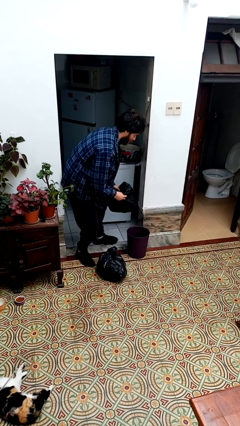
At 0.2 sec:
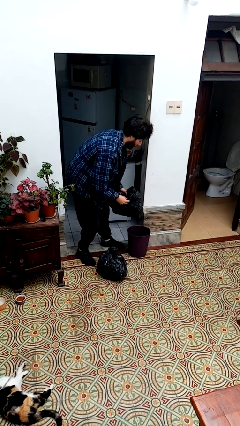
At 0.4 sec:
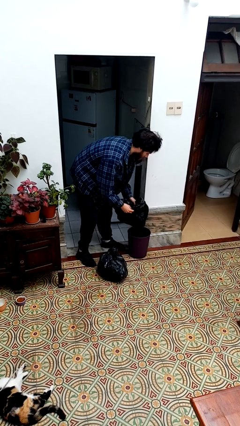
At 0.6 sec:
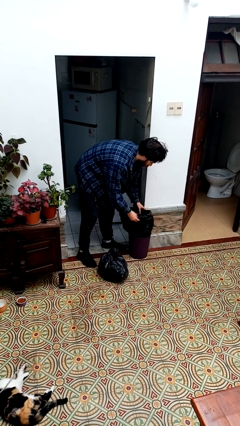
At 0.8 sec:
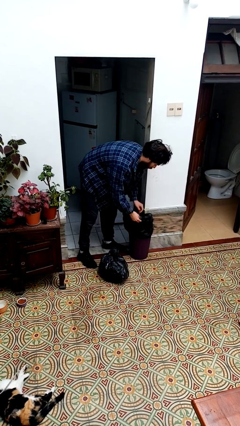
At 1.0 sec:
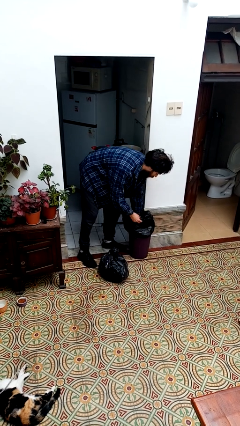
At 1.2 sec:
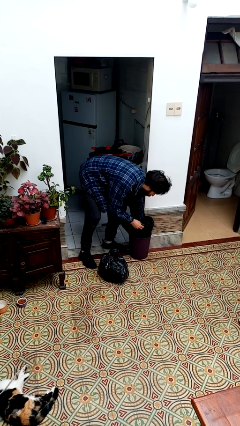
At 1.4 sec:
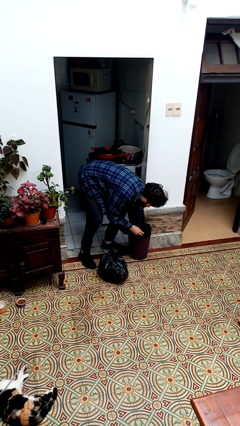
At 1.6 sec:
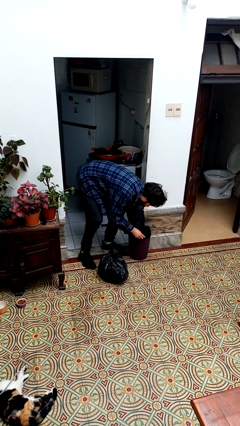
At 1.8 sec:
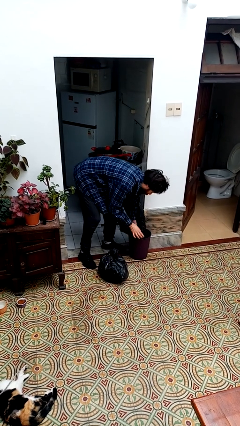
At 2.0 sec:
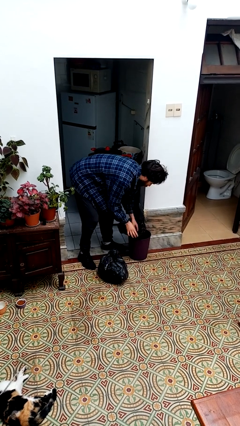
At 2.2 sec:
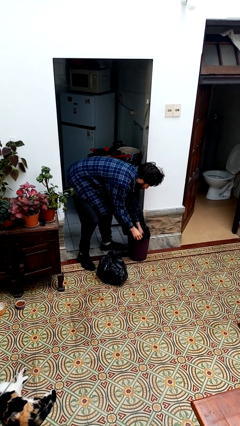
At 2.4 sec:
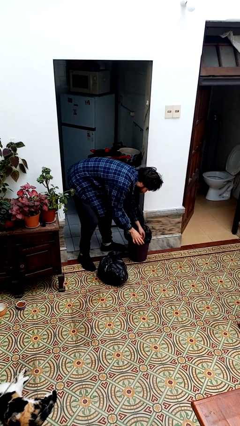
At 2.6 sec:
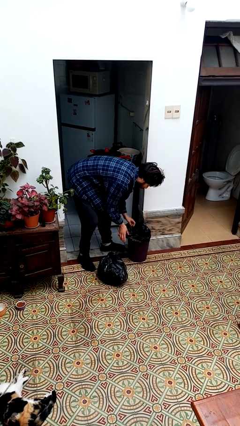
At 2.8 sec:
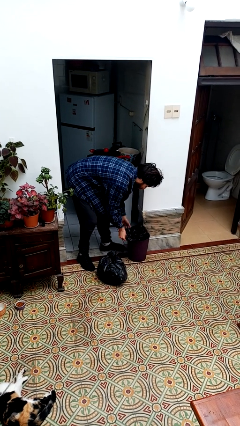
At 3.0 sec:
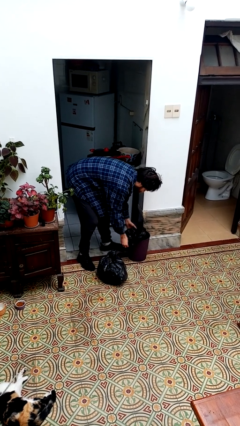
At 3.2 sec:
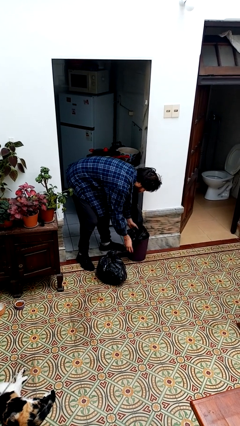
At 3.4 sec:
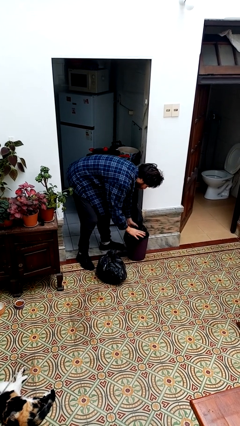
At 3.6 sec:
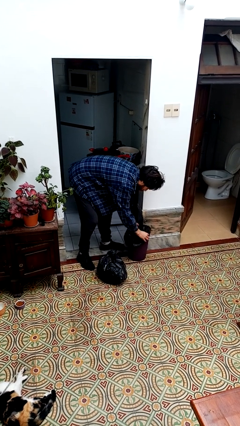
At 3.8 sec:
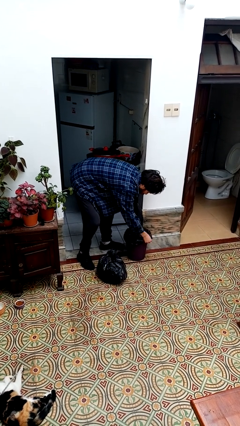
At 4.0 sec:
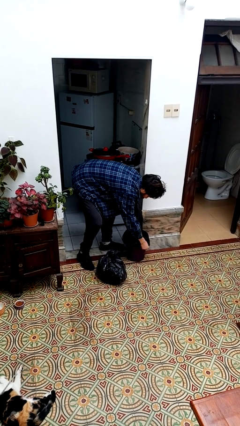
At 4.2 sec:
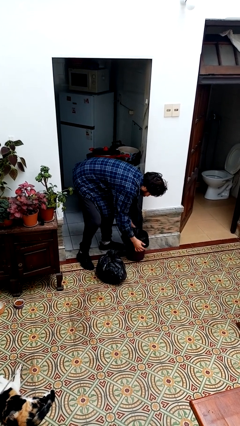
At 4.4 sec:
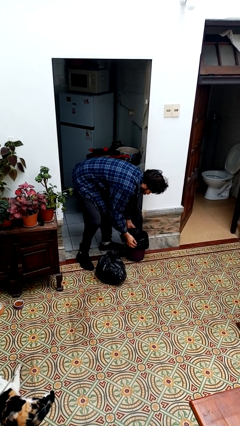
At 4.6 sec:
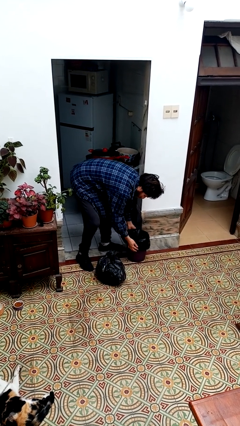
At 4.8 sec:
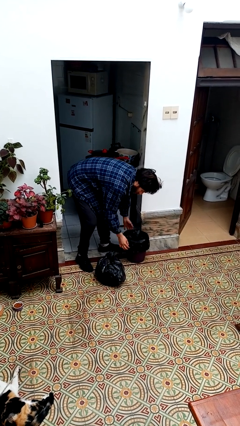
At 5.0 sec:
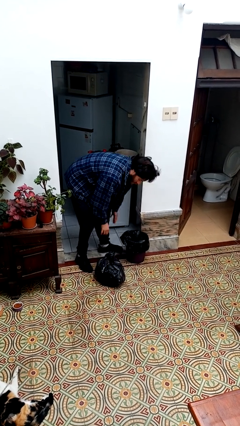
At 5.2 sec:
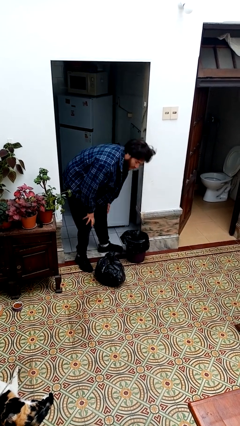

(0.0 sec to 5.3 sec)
person inserts trashbag into trashcan

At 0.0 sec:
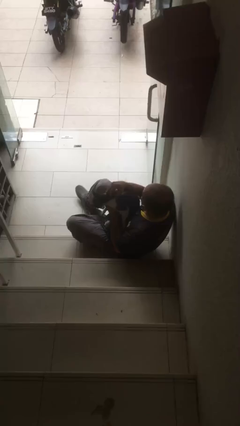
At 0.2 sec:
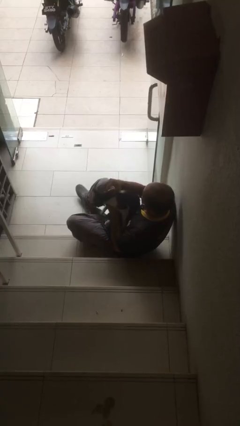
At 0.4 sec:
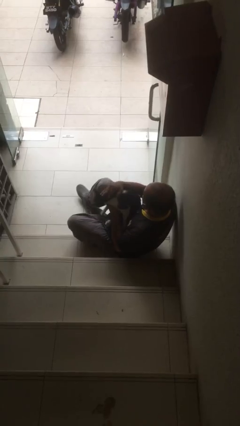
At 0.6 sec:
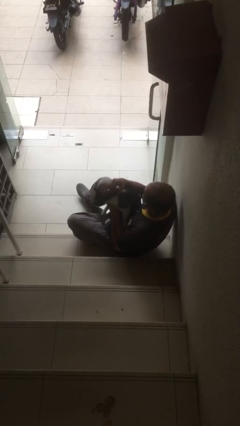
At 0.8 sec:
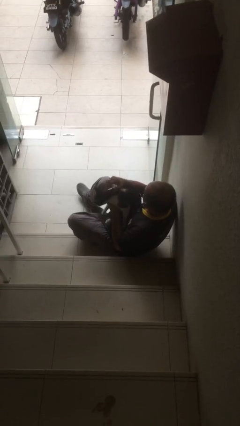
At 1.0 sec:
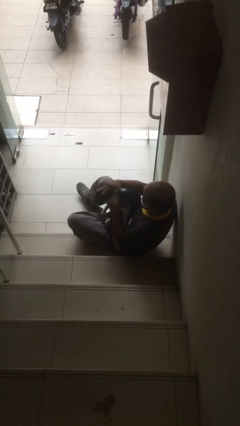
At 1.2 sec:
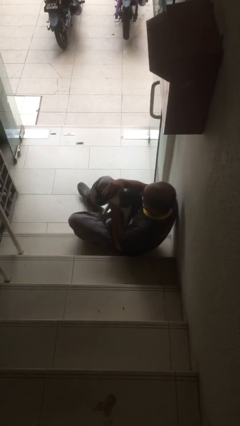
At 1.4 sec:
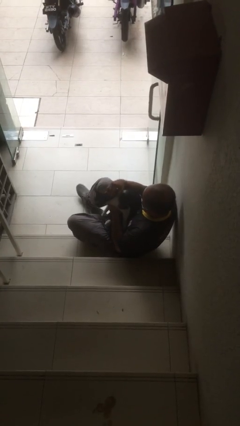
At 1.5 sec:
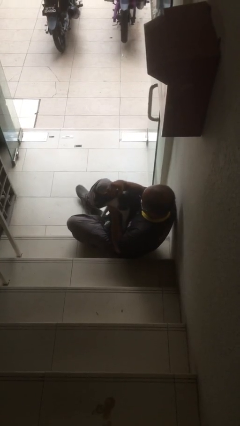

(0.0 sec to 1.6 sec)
person pets cat

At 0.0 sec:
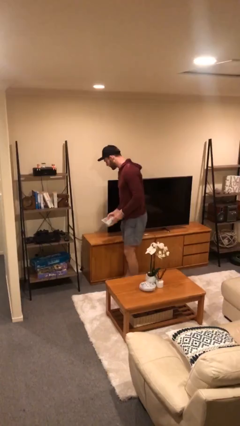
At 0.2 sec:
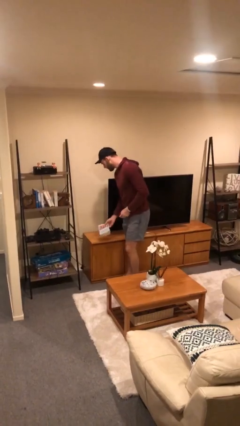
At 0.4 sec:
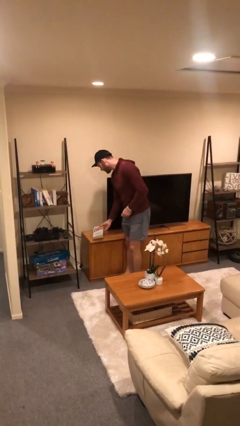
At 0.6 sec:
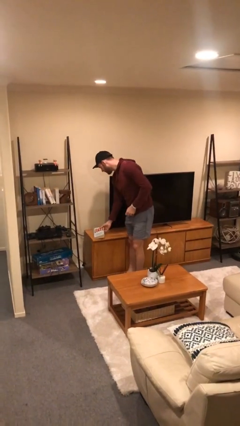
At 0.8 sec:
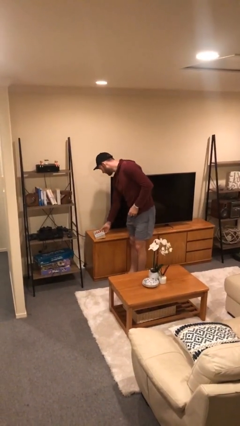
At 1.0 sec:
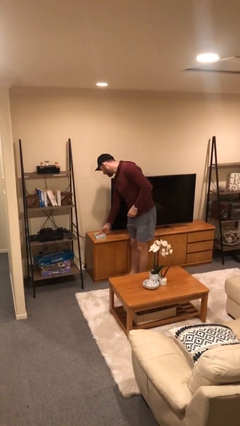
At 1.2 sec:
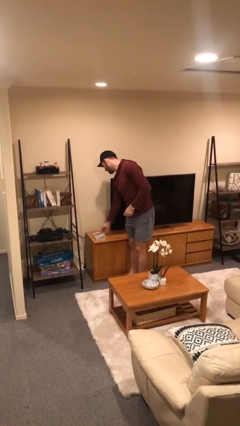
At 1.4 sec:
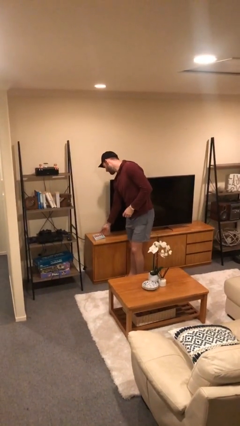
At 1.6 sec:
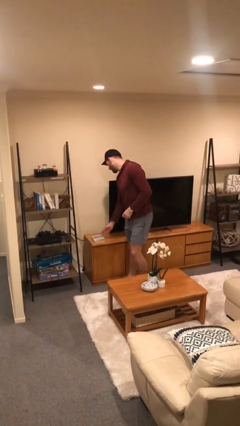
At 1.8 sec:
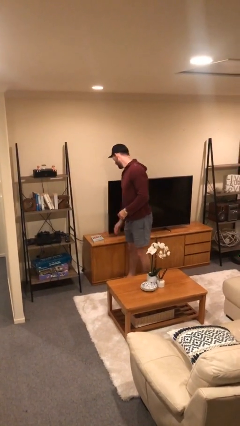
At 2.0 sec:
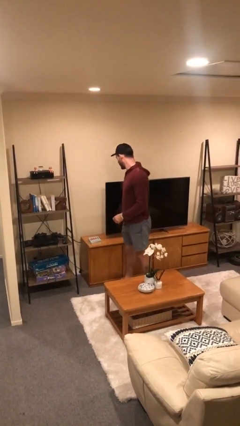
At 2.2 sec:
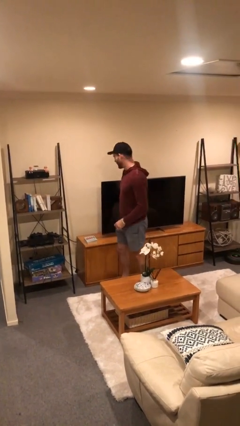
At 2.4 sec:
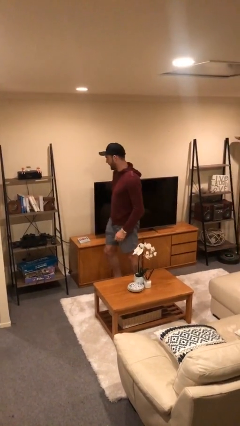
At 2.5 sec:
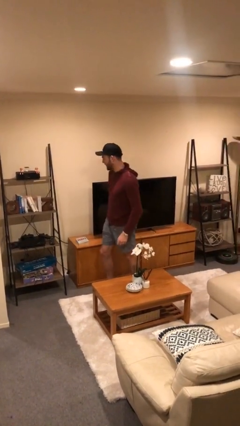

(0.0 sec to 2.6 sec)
person puts down object on table

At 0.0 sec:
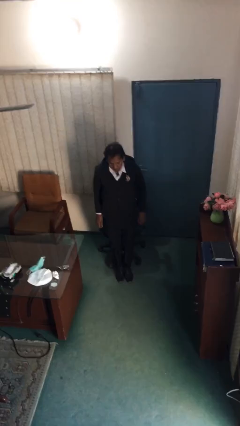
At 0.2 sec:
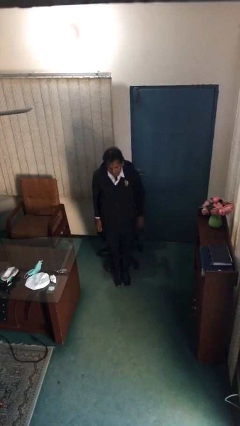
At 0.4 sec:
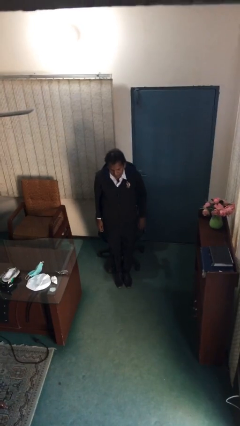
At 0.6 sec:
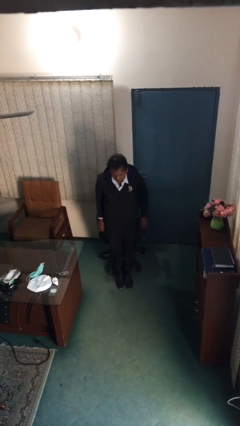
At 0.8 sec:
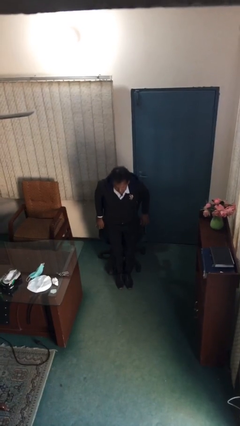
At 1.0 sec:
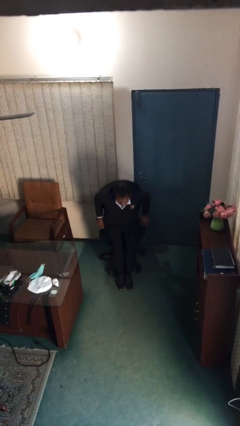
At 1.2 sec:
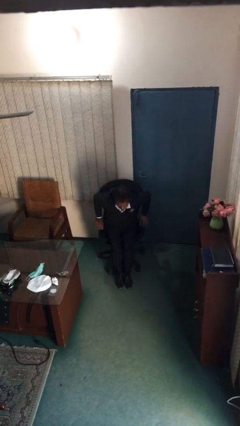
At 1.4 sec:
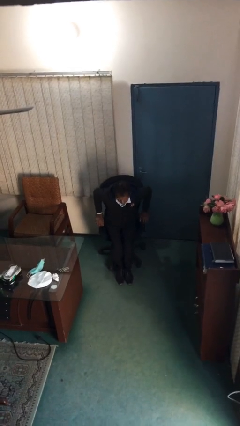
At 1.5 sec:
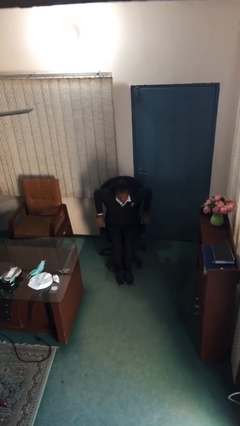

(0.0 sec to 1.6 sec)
person sits down

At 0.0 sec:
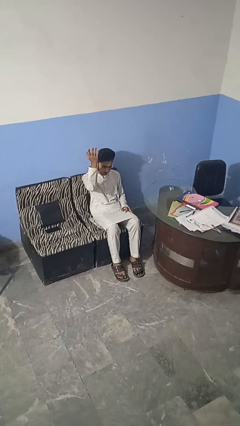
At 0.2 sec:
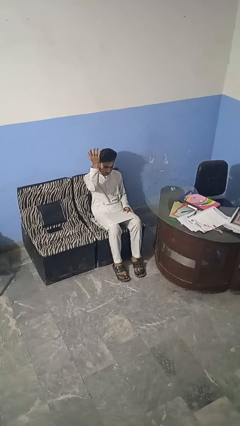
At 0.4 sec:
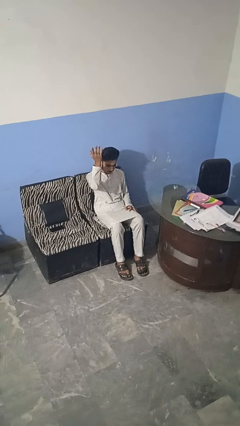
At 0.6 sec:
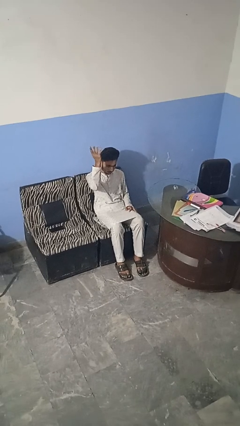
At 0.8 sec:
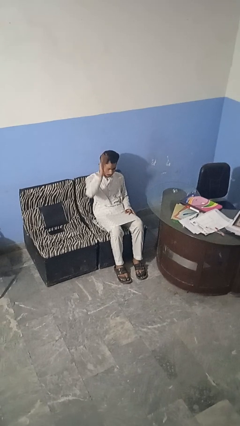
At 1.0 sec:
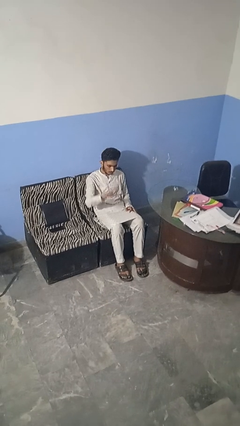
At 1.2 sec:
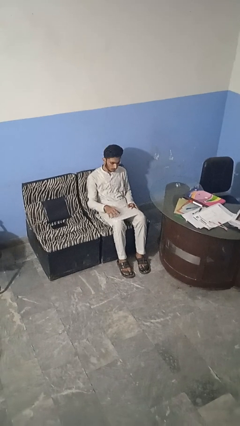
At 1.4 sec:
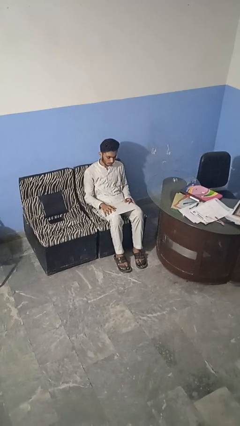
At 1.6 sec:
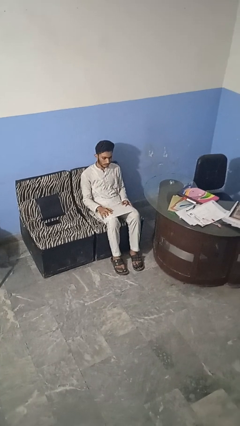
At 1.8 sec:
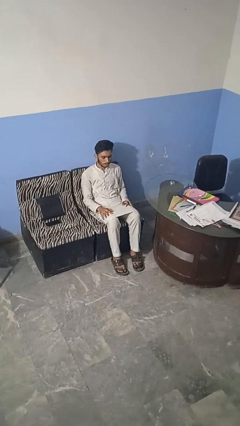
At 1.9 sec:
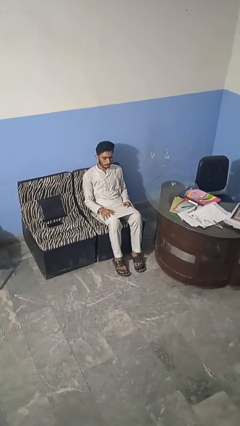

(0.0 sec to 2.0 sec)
person gestures swipe down

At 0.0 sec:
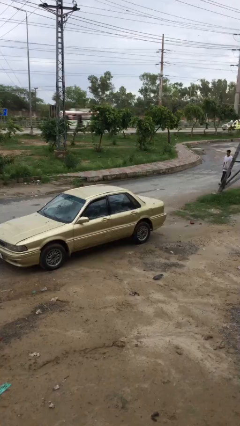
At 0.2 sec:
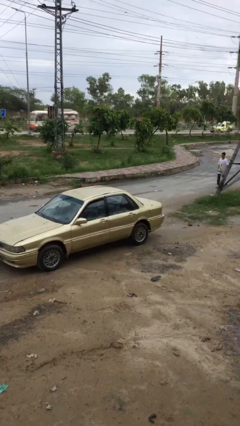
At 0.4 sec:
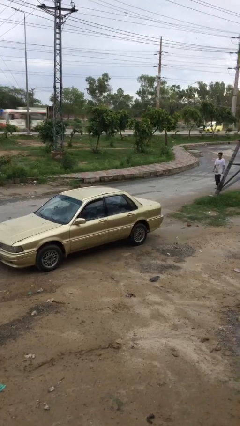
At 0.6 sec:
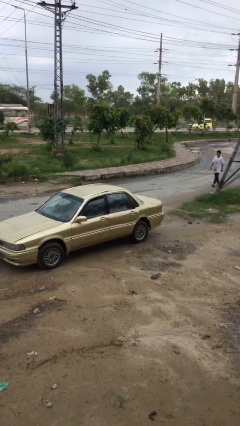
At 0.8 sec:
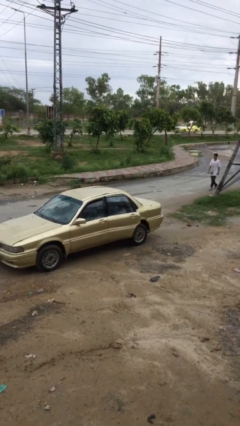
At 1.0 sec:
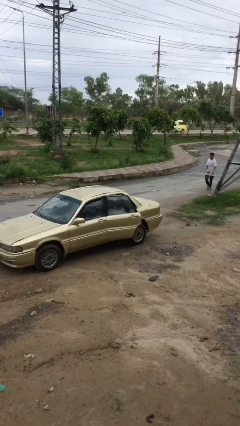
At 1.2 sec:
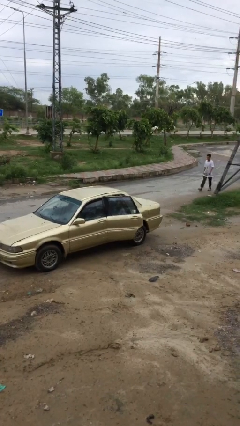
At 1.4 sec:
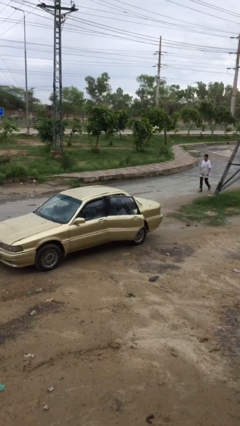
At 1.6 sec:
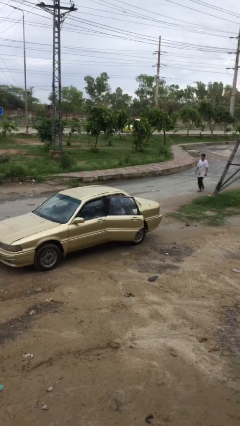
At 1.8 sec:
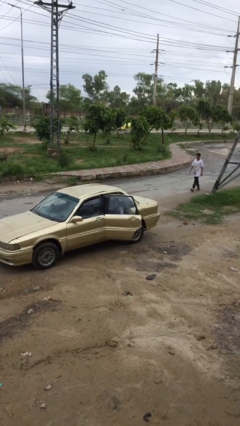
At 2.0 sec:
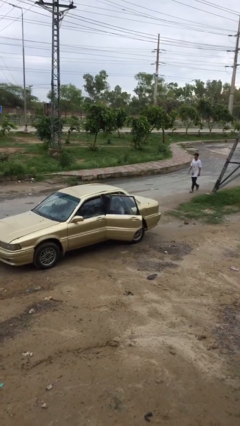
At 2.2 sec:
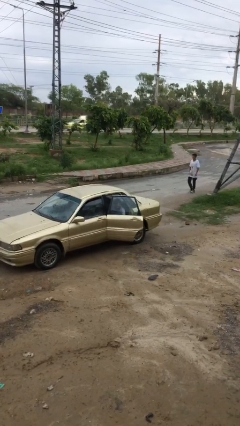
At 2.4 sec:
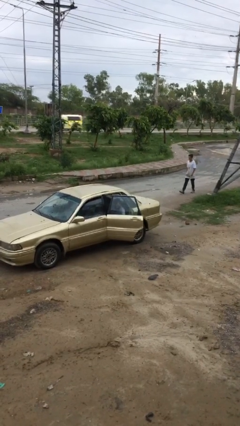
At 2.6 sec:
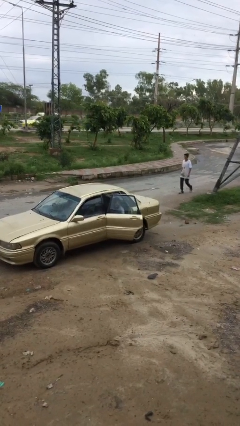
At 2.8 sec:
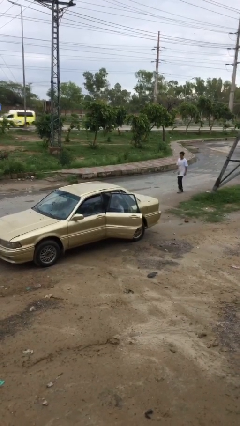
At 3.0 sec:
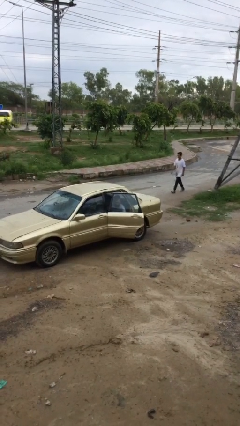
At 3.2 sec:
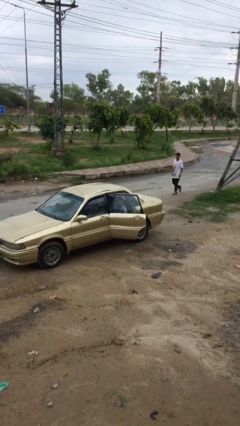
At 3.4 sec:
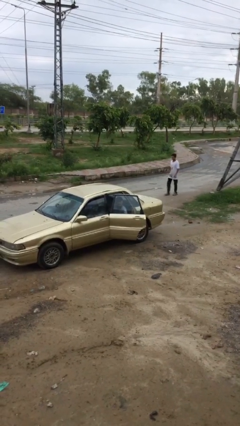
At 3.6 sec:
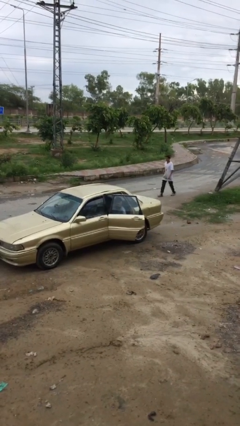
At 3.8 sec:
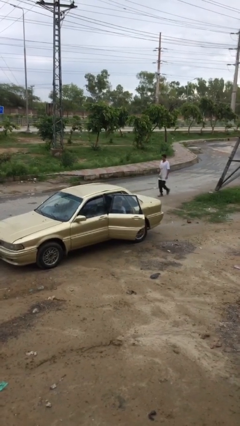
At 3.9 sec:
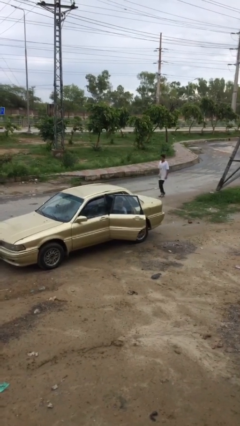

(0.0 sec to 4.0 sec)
person opens car door

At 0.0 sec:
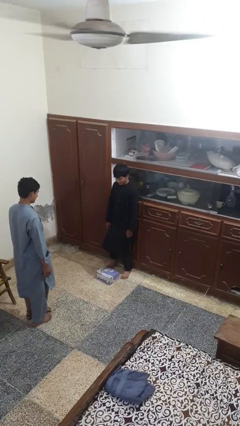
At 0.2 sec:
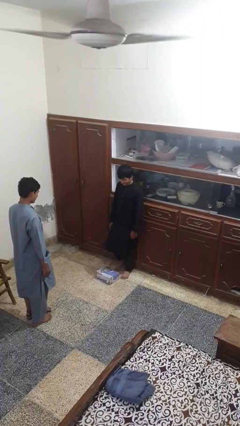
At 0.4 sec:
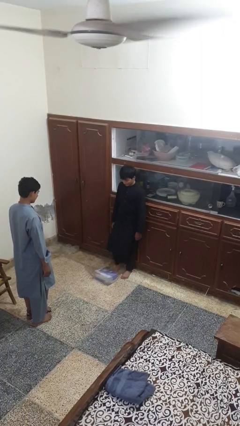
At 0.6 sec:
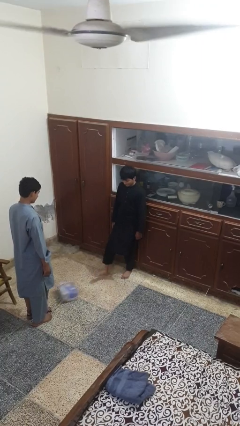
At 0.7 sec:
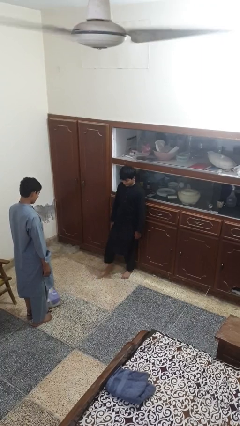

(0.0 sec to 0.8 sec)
person kicks object to person
